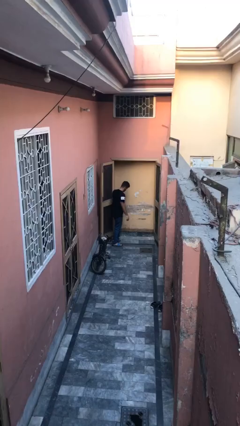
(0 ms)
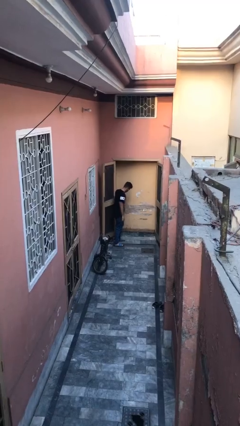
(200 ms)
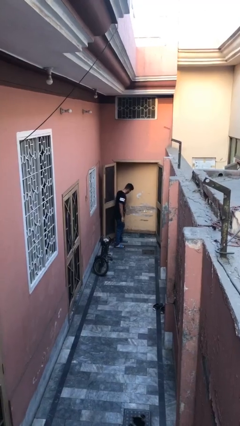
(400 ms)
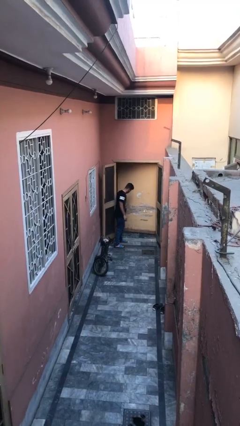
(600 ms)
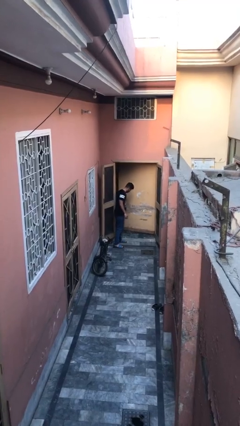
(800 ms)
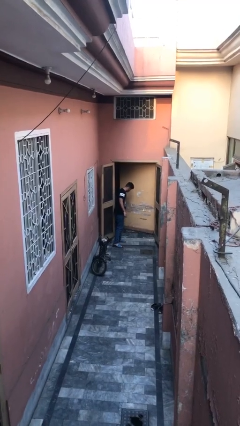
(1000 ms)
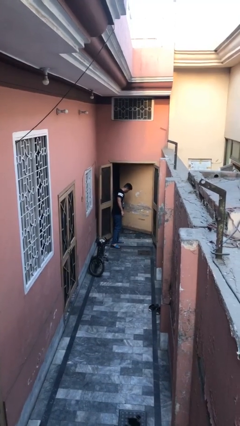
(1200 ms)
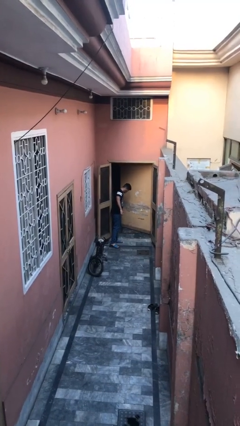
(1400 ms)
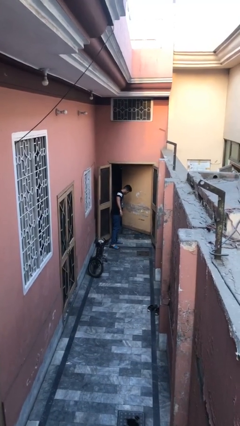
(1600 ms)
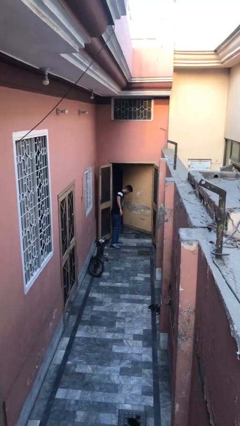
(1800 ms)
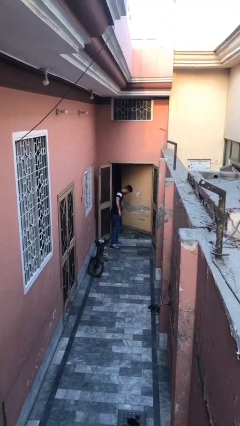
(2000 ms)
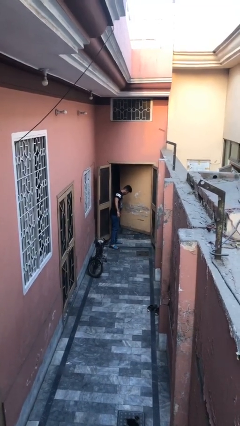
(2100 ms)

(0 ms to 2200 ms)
person opens facility door

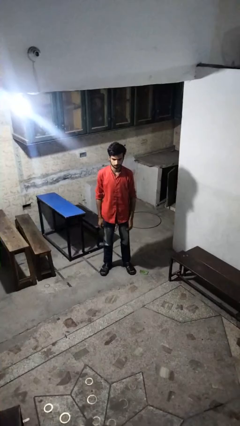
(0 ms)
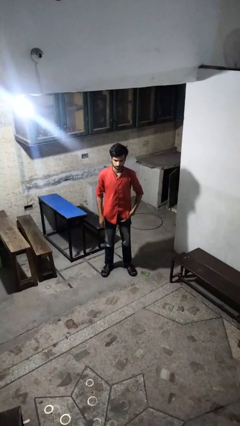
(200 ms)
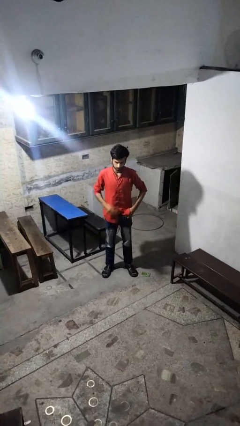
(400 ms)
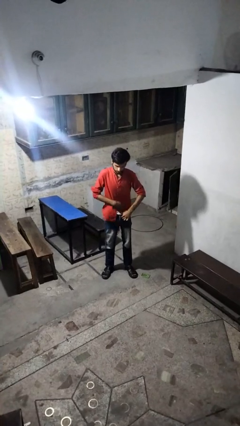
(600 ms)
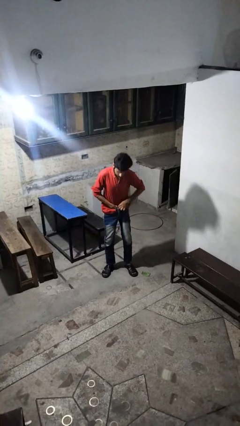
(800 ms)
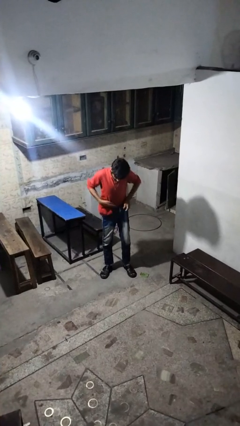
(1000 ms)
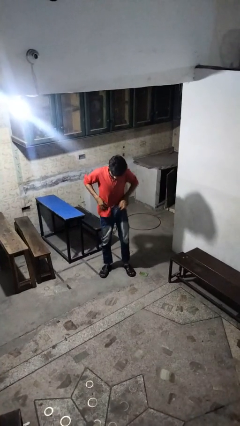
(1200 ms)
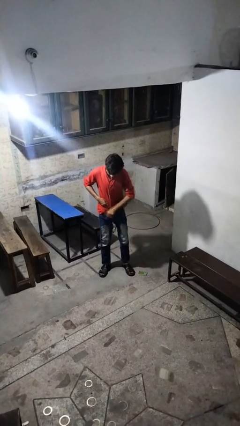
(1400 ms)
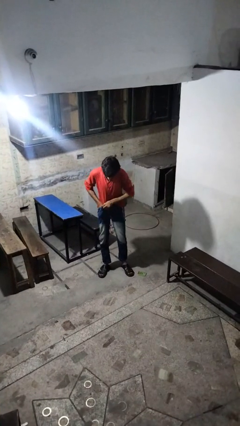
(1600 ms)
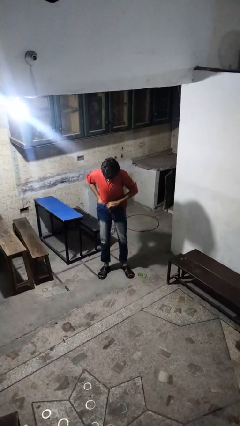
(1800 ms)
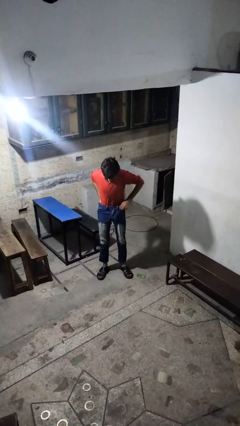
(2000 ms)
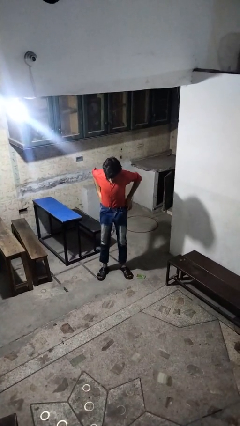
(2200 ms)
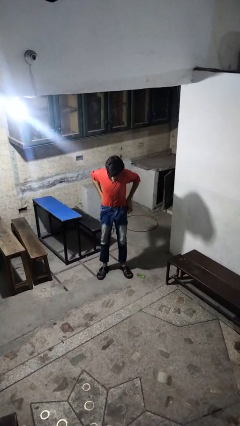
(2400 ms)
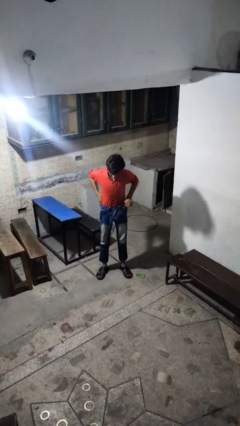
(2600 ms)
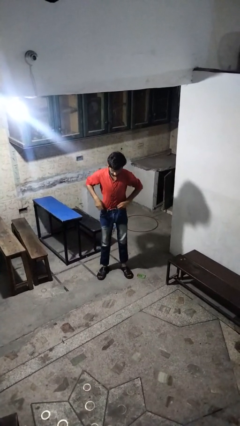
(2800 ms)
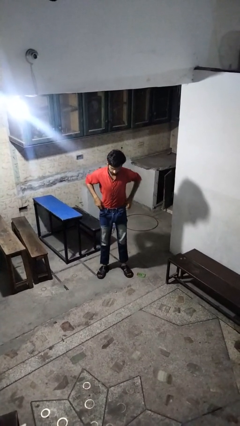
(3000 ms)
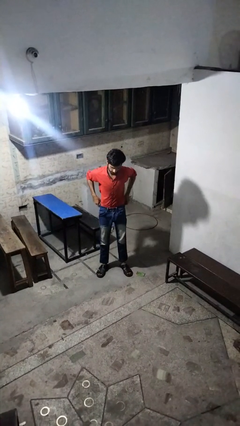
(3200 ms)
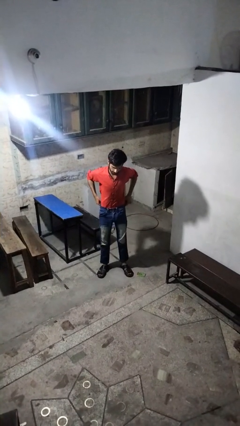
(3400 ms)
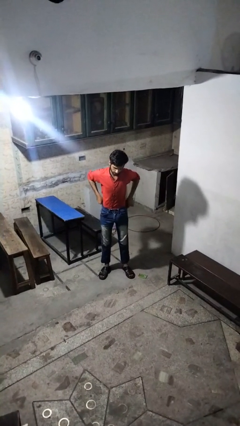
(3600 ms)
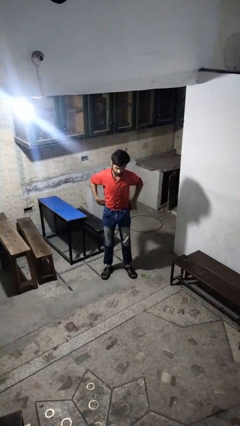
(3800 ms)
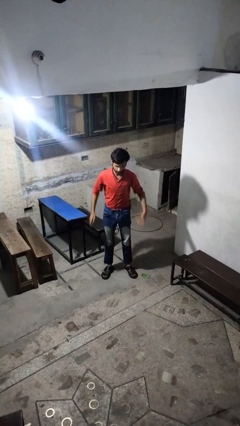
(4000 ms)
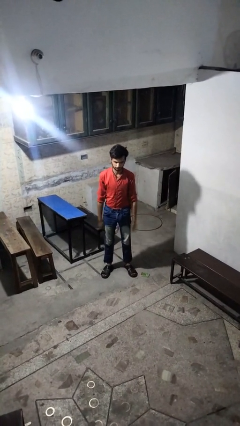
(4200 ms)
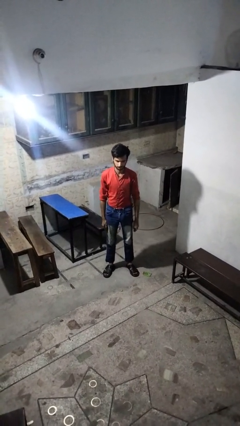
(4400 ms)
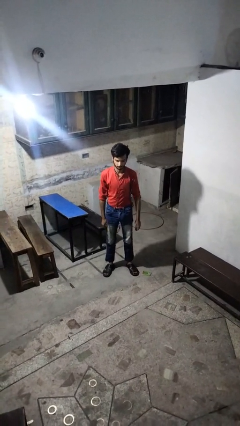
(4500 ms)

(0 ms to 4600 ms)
person tucks in shirt

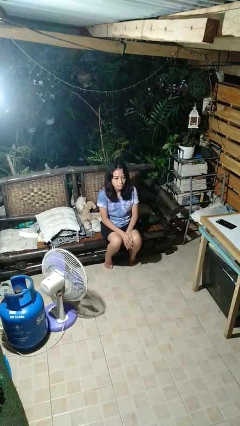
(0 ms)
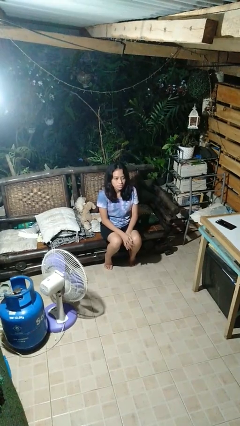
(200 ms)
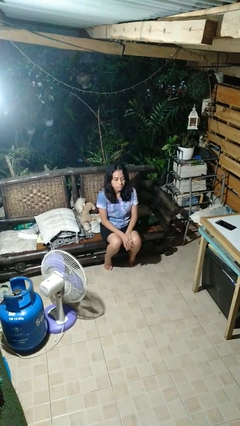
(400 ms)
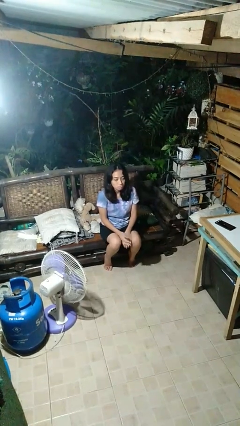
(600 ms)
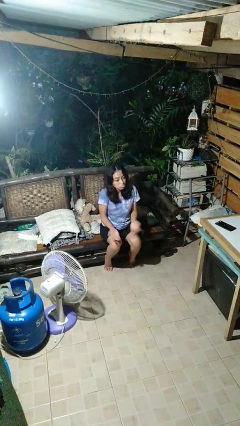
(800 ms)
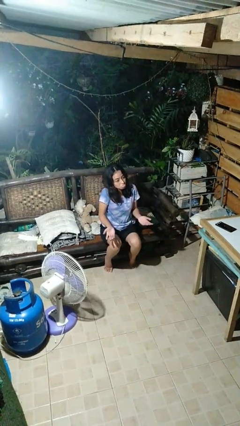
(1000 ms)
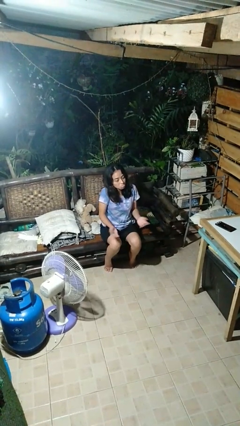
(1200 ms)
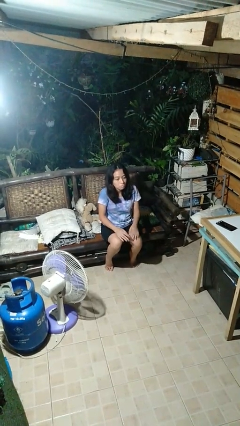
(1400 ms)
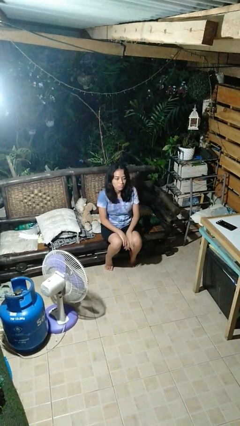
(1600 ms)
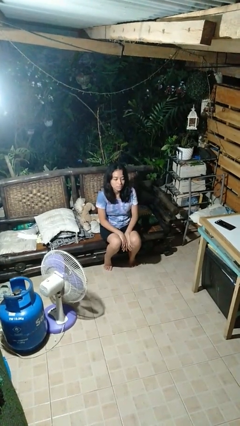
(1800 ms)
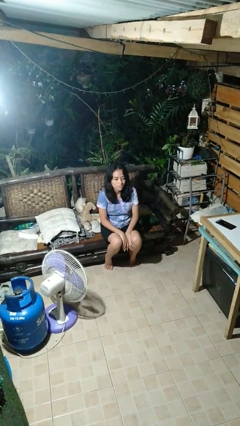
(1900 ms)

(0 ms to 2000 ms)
person shrugs

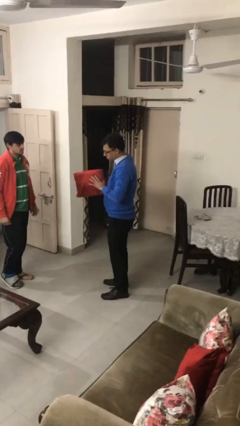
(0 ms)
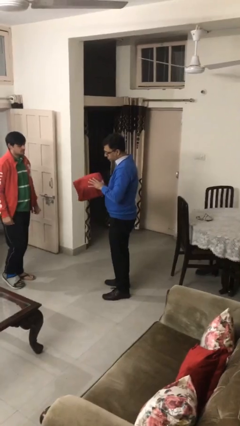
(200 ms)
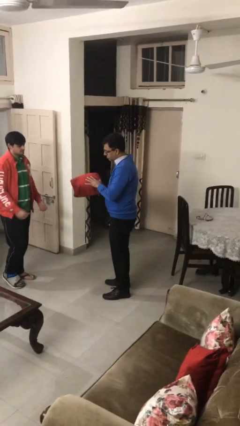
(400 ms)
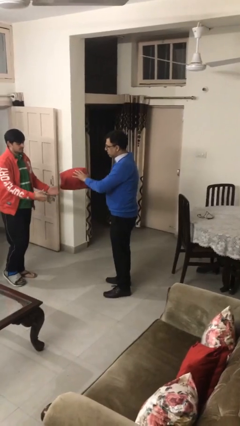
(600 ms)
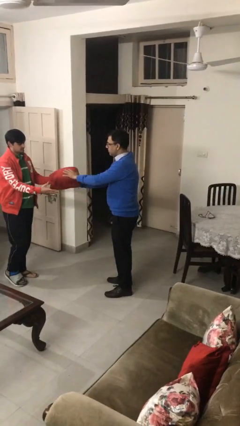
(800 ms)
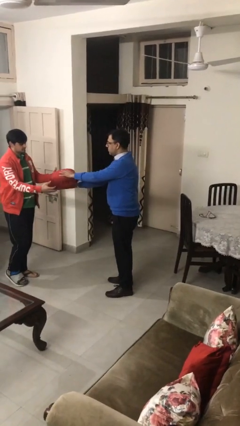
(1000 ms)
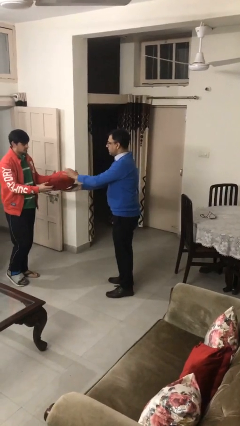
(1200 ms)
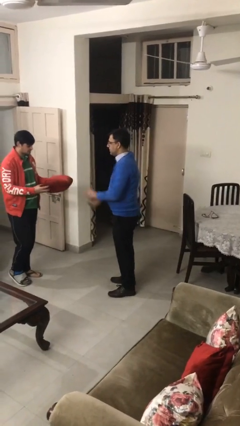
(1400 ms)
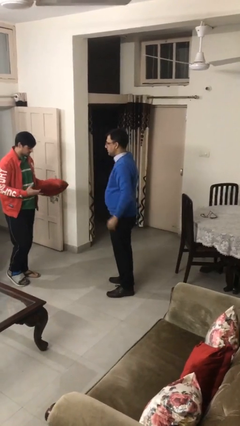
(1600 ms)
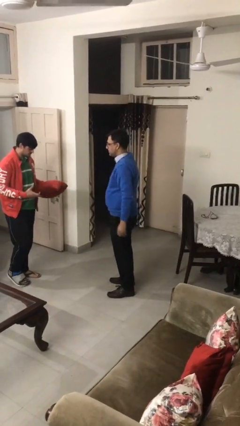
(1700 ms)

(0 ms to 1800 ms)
person transfers object to person

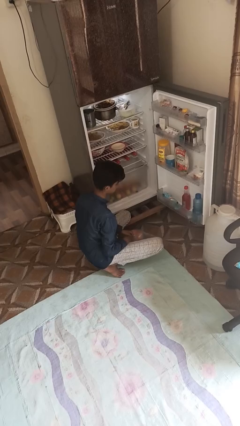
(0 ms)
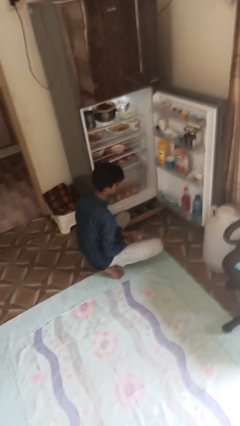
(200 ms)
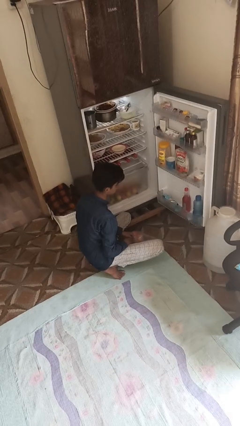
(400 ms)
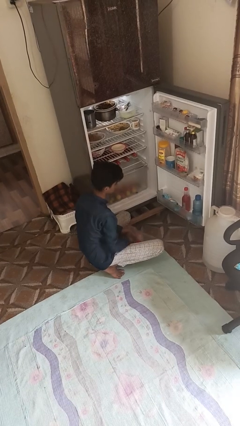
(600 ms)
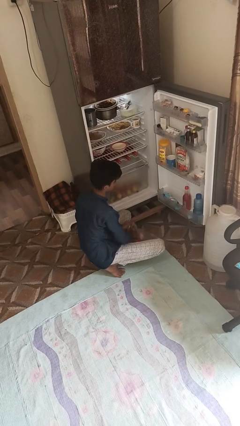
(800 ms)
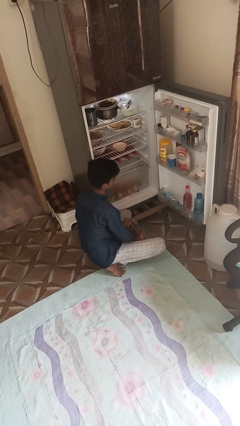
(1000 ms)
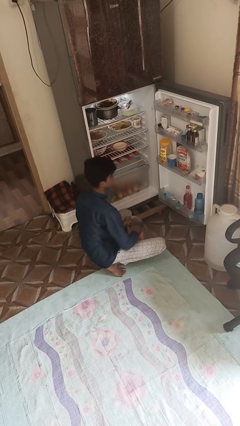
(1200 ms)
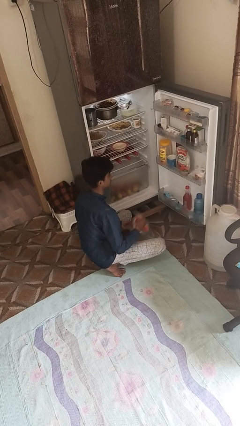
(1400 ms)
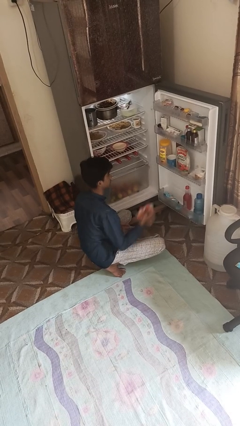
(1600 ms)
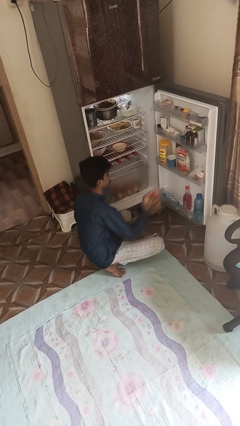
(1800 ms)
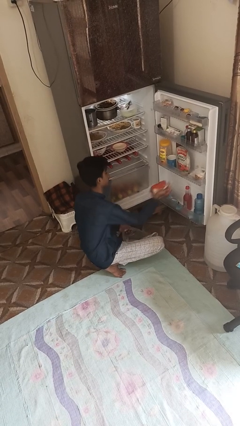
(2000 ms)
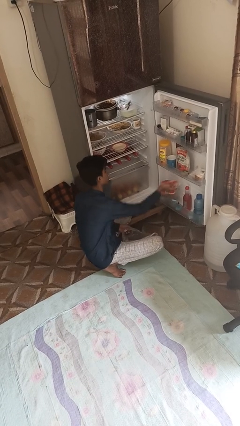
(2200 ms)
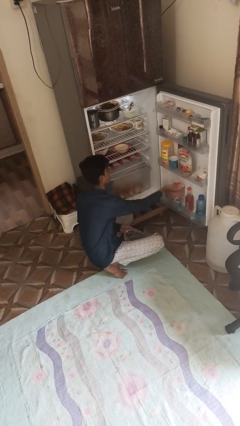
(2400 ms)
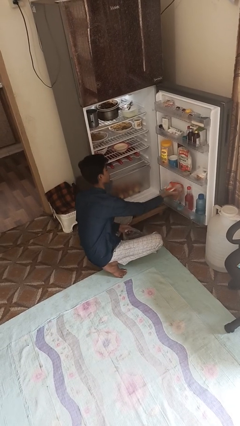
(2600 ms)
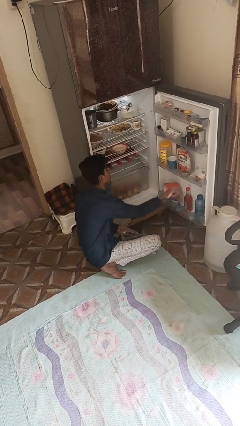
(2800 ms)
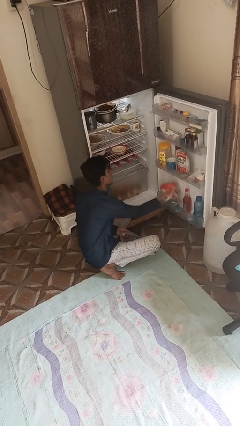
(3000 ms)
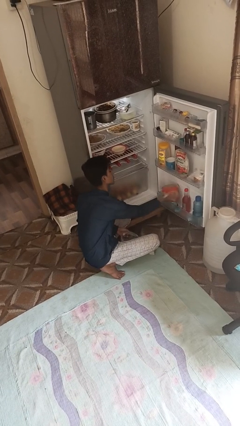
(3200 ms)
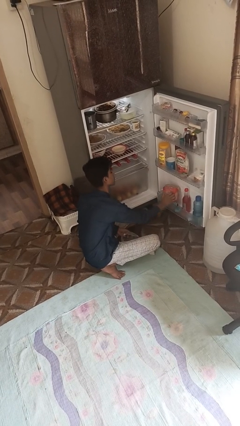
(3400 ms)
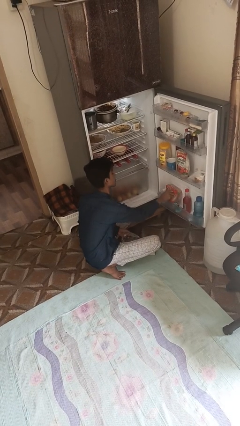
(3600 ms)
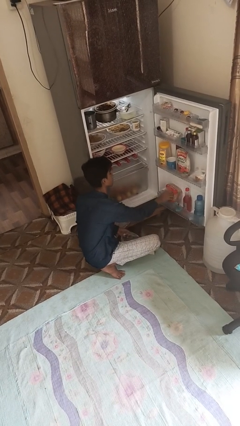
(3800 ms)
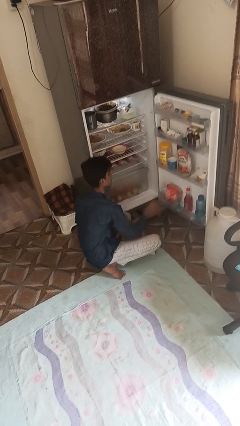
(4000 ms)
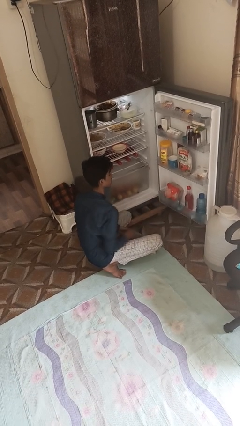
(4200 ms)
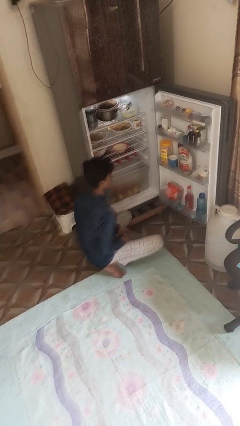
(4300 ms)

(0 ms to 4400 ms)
person loads groceries into refrigerator

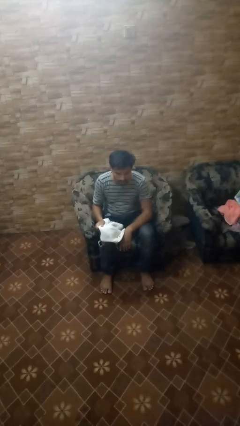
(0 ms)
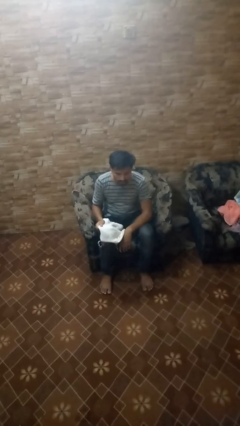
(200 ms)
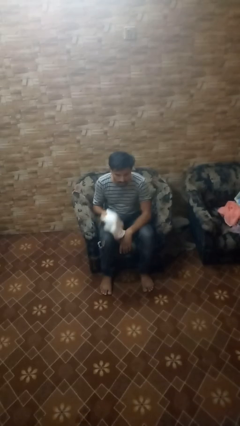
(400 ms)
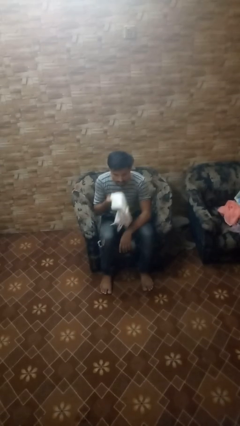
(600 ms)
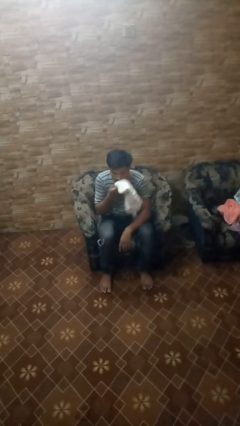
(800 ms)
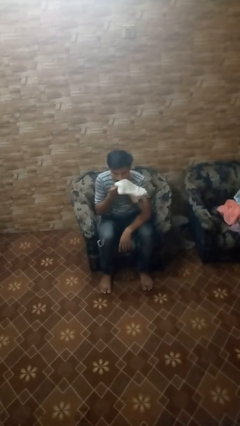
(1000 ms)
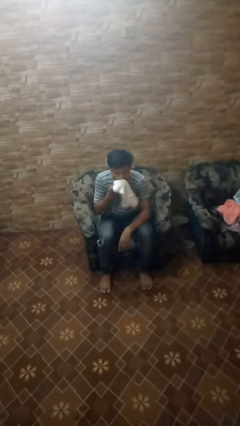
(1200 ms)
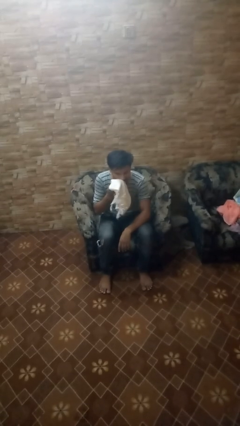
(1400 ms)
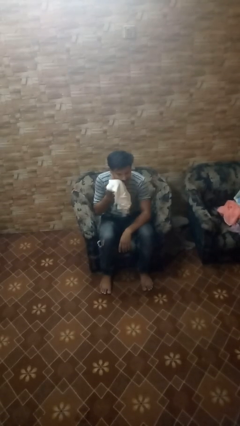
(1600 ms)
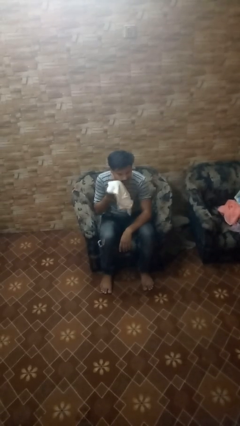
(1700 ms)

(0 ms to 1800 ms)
person wipes mouth with napkin

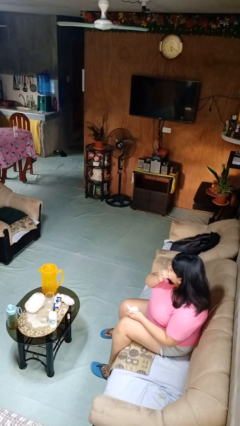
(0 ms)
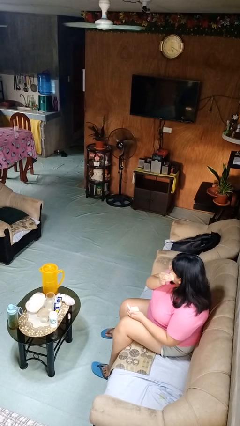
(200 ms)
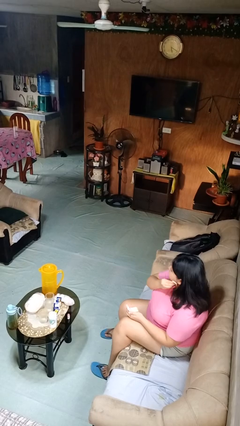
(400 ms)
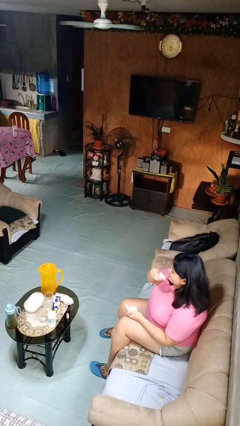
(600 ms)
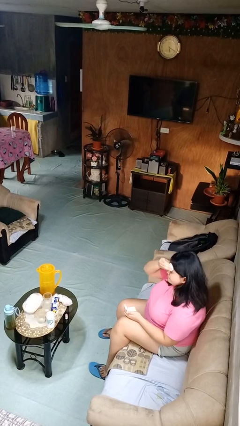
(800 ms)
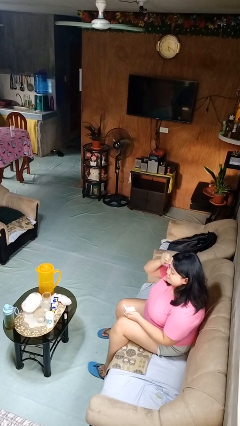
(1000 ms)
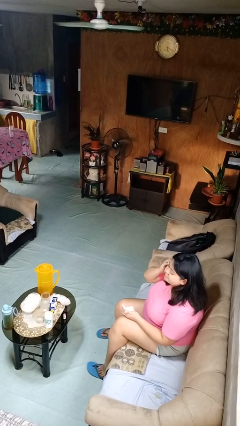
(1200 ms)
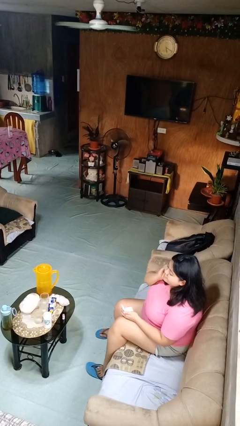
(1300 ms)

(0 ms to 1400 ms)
person applies foundation makeup
